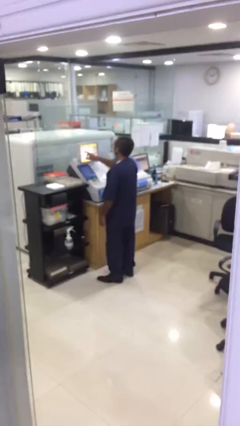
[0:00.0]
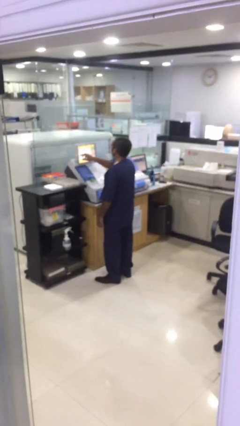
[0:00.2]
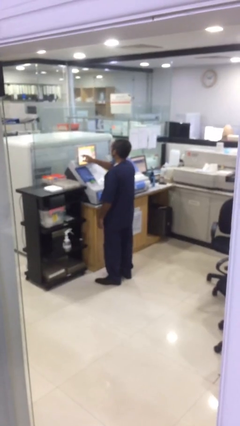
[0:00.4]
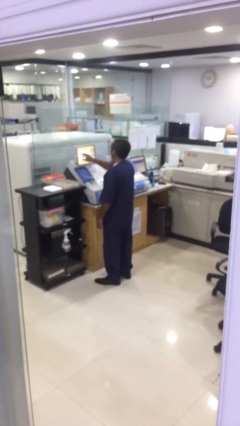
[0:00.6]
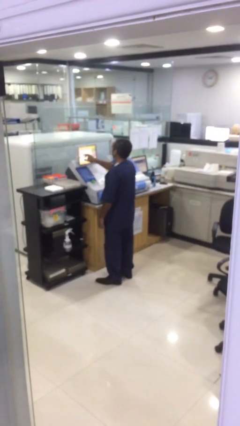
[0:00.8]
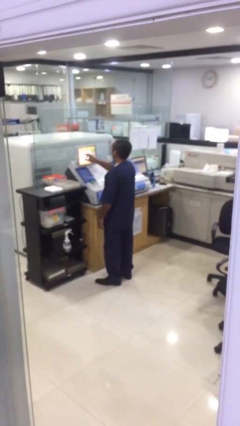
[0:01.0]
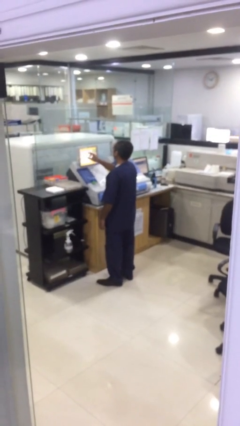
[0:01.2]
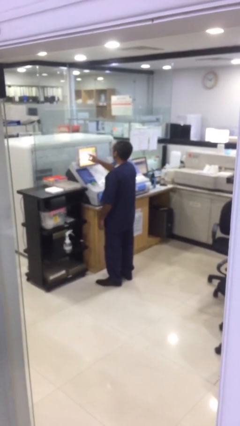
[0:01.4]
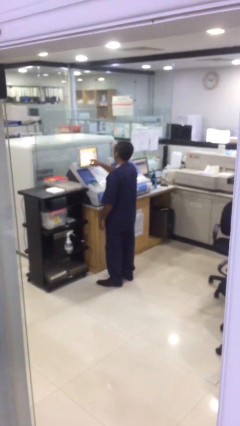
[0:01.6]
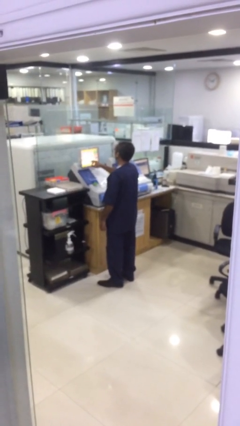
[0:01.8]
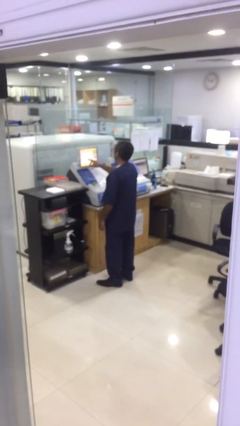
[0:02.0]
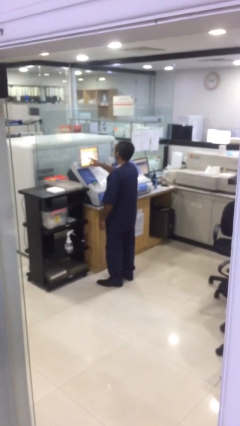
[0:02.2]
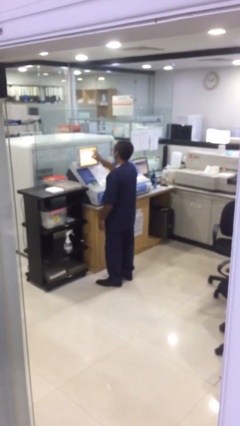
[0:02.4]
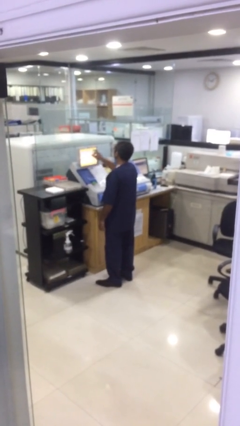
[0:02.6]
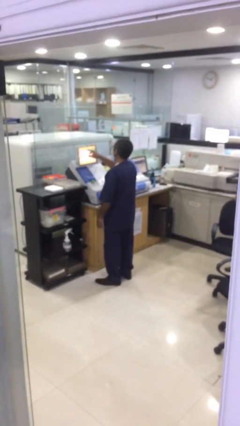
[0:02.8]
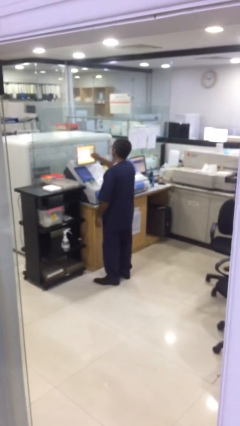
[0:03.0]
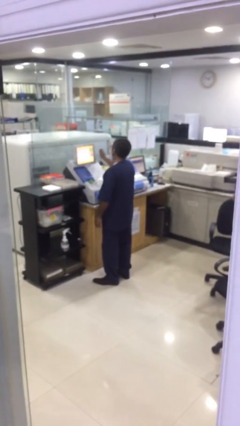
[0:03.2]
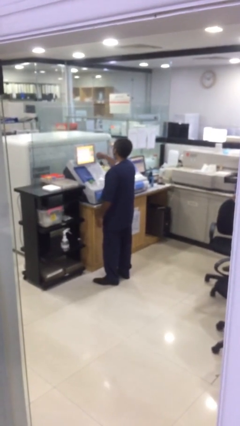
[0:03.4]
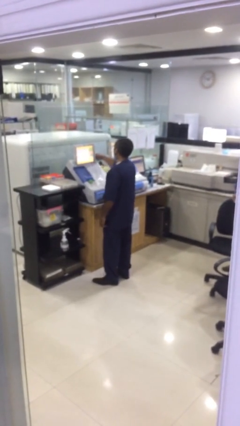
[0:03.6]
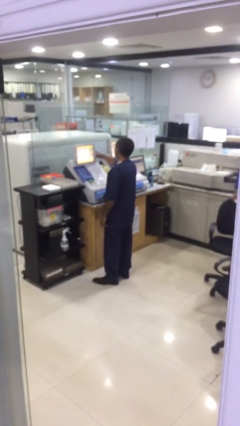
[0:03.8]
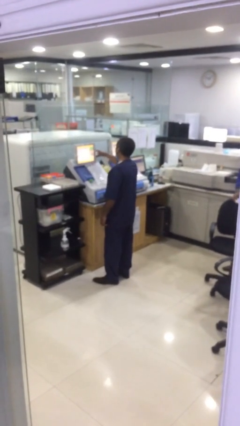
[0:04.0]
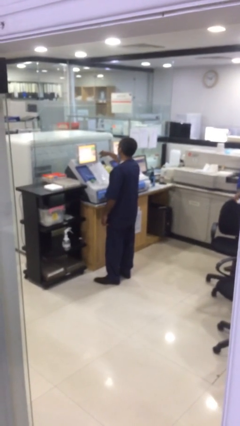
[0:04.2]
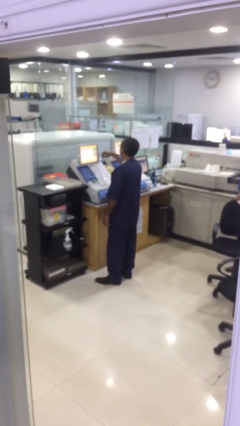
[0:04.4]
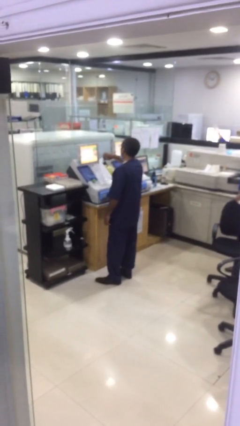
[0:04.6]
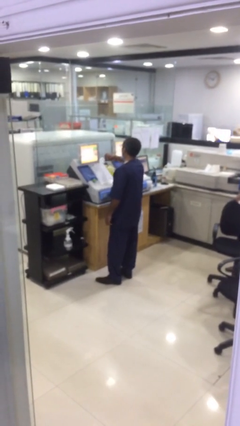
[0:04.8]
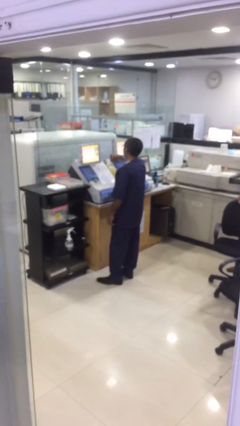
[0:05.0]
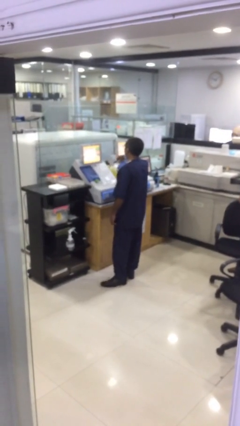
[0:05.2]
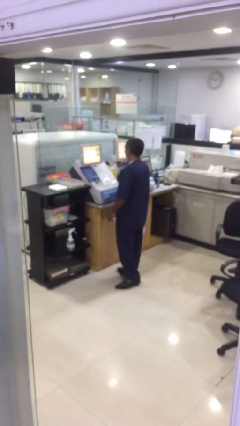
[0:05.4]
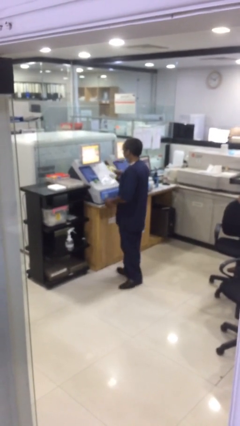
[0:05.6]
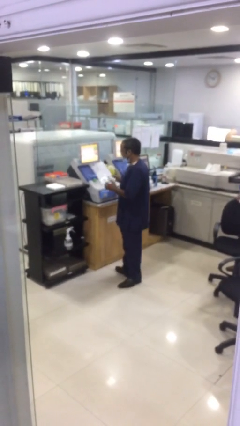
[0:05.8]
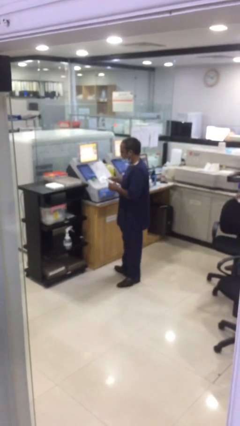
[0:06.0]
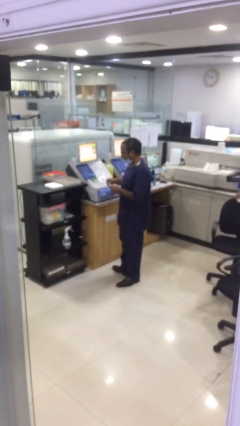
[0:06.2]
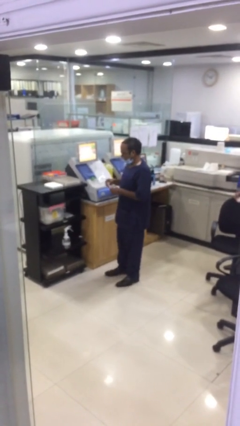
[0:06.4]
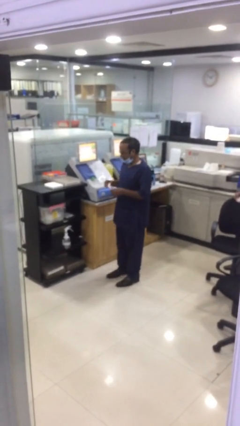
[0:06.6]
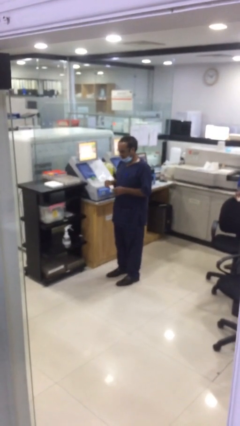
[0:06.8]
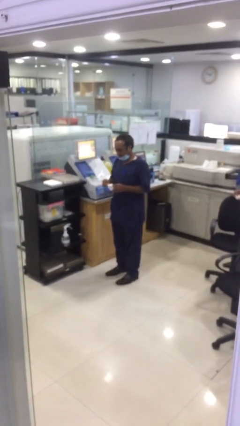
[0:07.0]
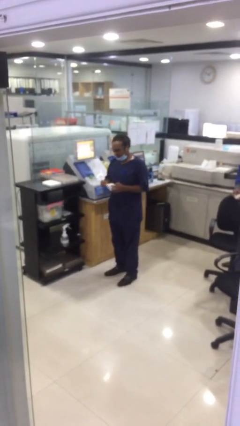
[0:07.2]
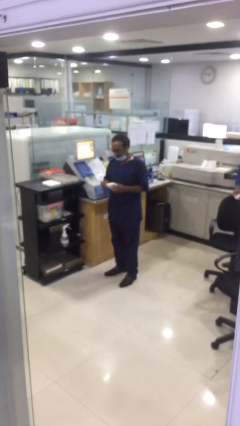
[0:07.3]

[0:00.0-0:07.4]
person purchases from machine

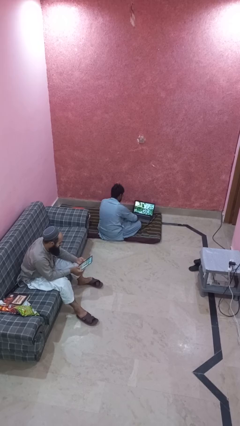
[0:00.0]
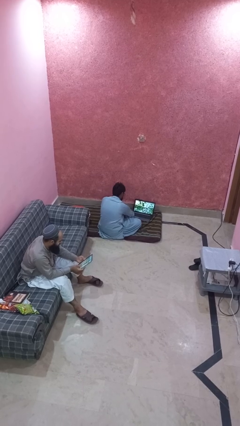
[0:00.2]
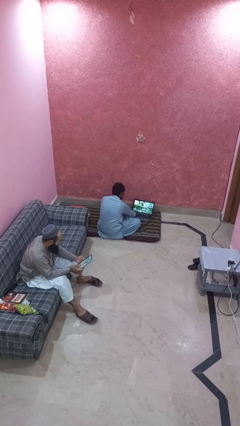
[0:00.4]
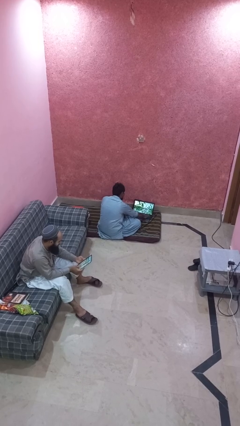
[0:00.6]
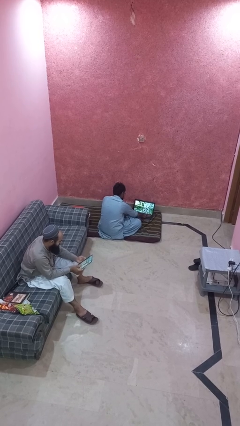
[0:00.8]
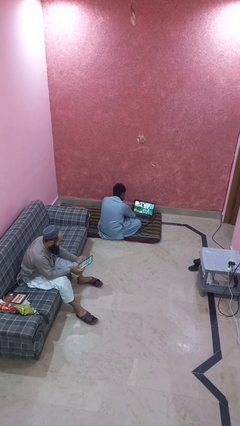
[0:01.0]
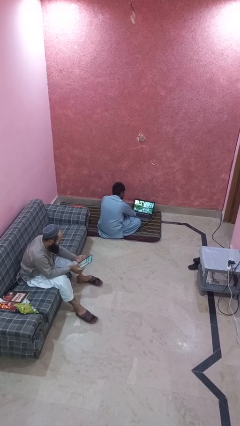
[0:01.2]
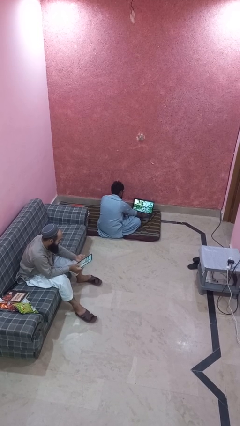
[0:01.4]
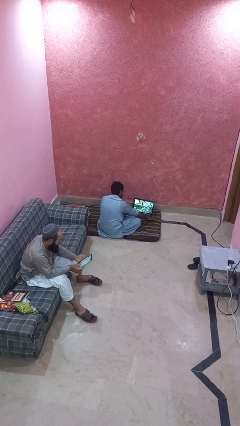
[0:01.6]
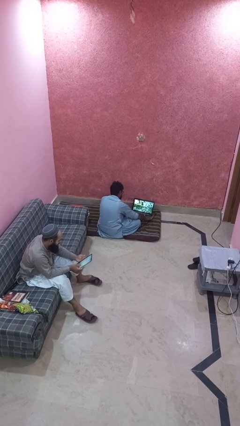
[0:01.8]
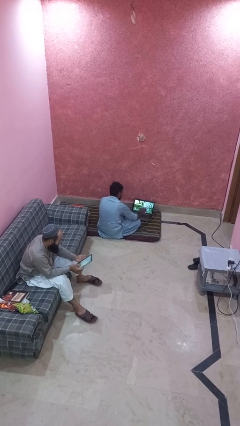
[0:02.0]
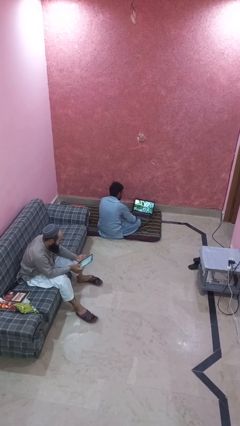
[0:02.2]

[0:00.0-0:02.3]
person waves hand over object

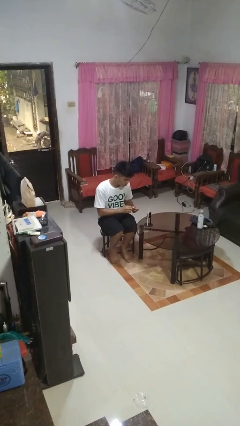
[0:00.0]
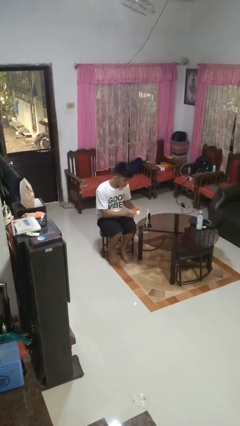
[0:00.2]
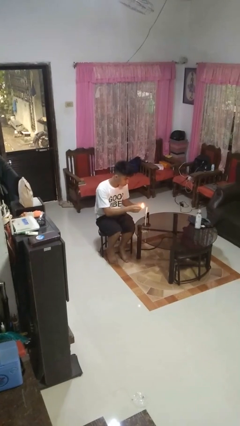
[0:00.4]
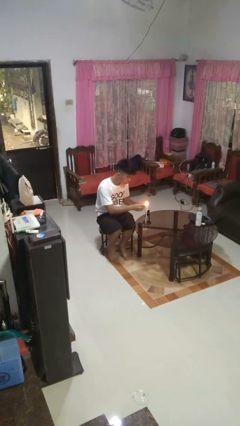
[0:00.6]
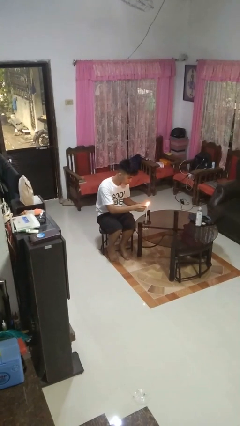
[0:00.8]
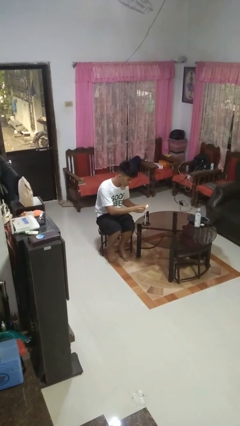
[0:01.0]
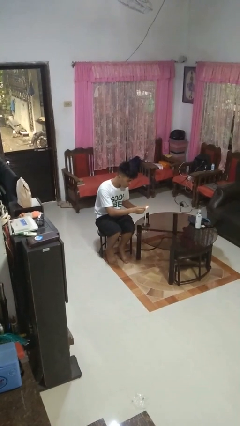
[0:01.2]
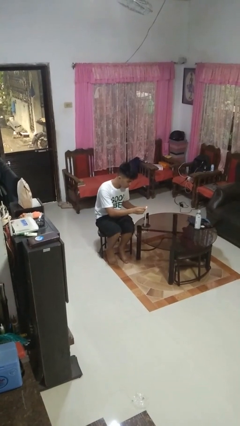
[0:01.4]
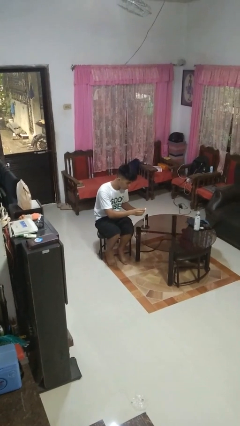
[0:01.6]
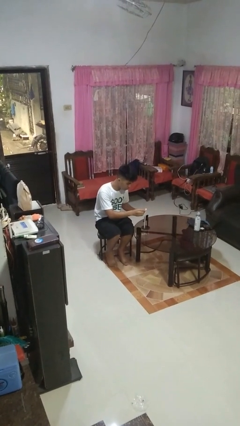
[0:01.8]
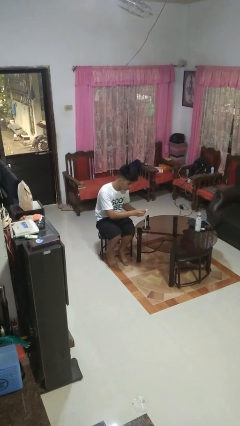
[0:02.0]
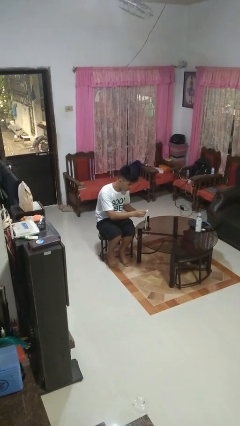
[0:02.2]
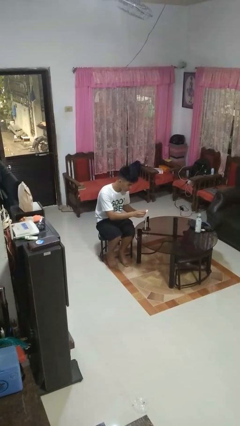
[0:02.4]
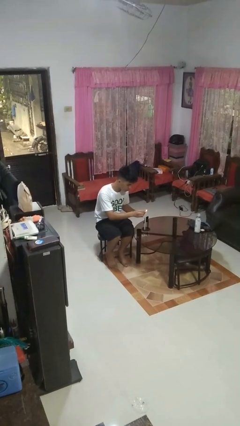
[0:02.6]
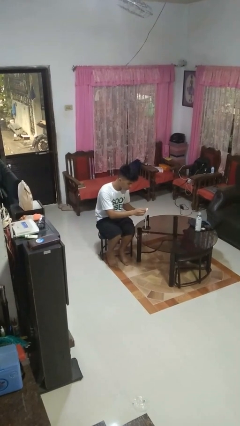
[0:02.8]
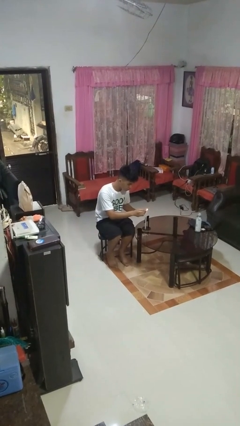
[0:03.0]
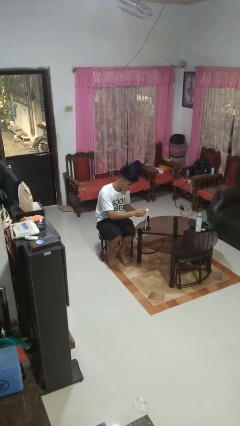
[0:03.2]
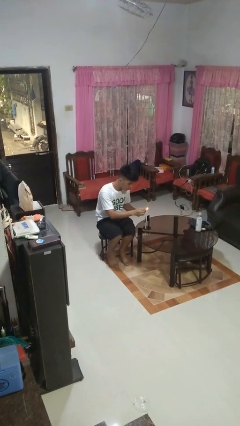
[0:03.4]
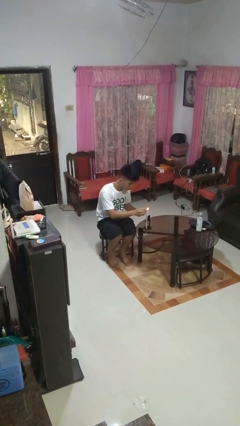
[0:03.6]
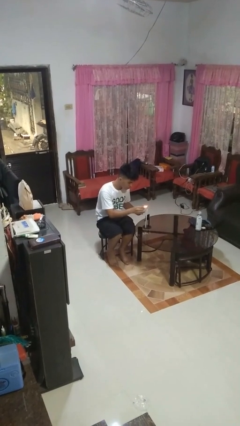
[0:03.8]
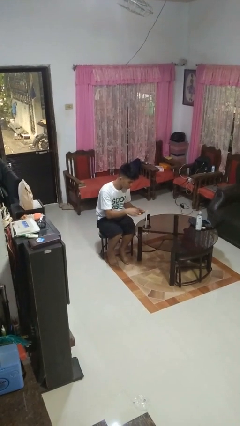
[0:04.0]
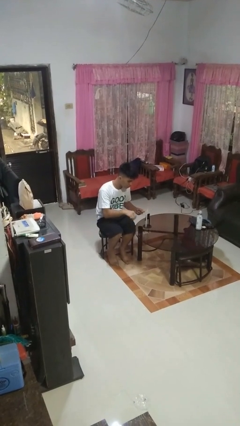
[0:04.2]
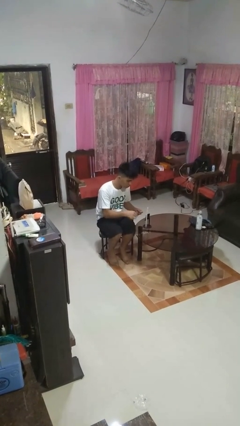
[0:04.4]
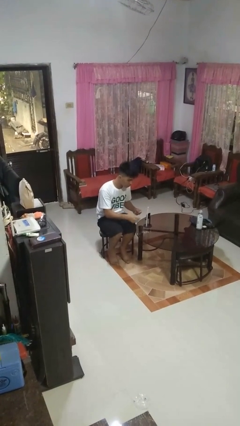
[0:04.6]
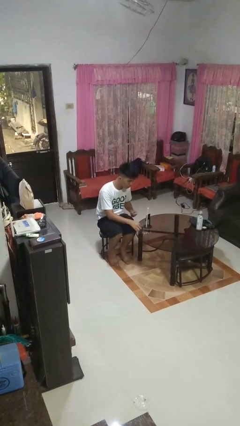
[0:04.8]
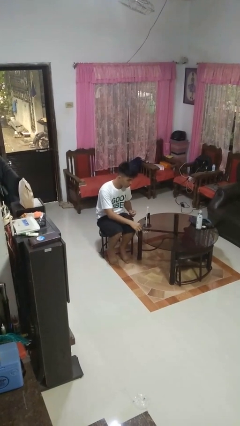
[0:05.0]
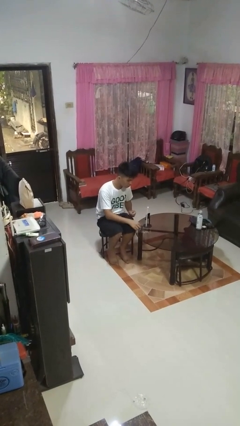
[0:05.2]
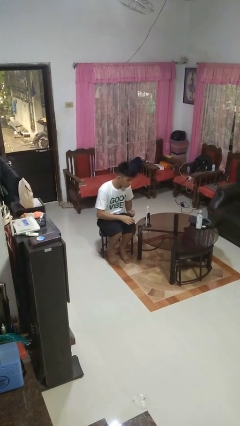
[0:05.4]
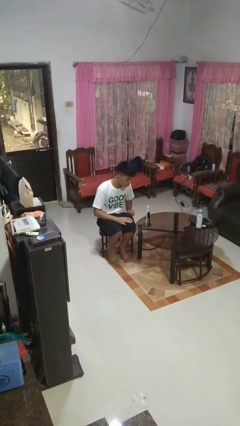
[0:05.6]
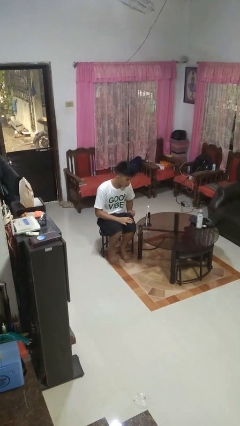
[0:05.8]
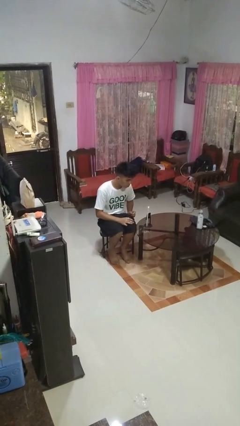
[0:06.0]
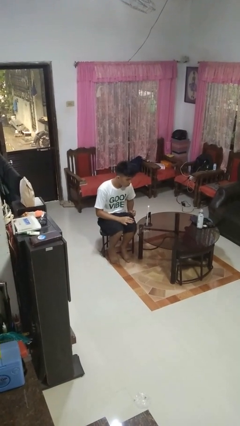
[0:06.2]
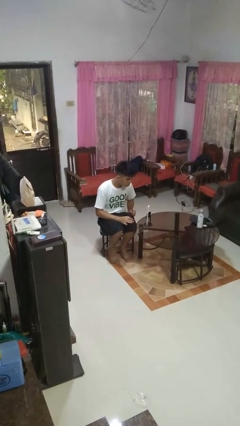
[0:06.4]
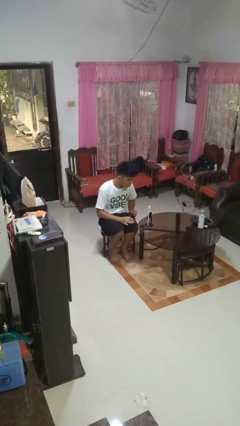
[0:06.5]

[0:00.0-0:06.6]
person lights candle

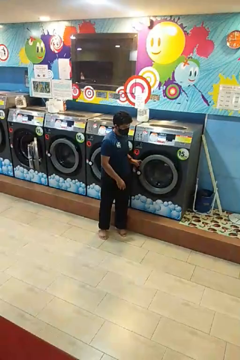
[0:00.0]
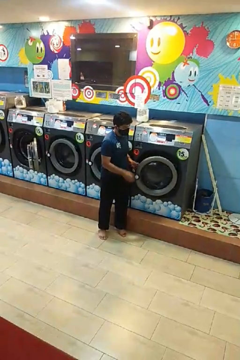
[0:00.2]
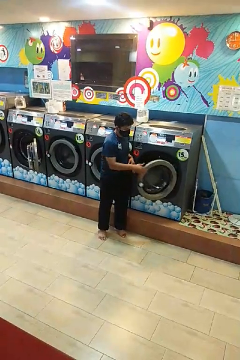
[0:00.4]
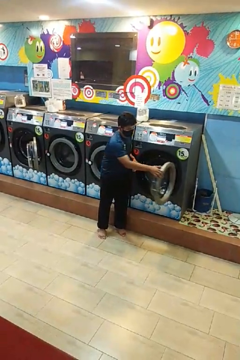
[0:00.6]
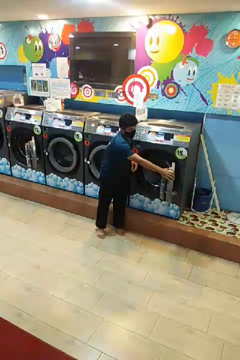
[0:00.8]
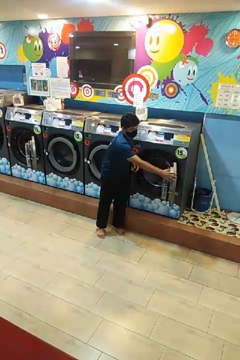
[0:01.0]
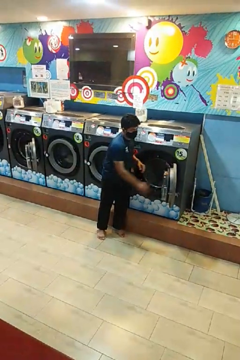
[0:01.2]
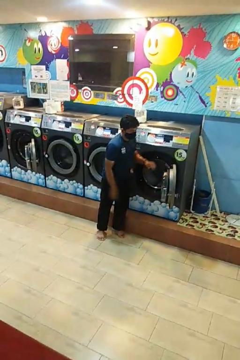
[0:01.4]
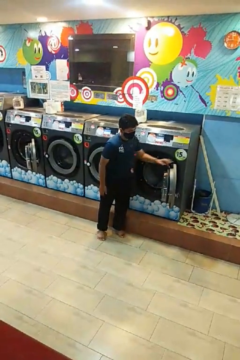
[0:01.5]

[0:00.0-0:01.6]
person opens clothes washer
